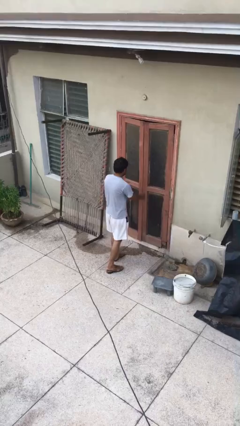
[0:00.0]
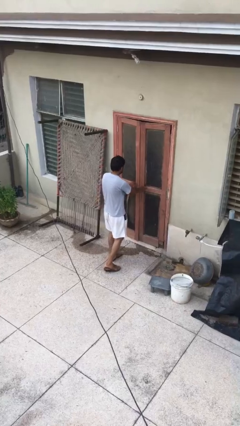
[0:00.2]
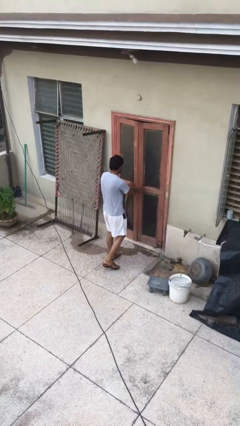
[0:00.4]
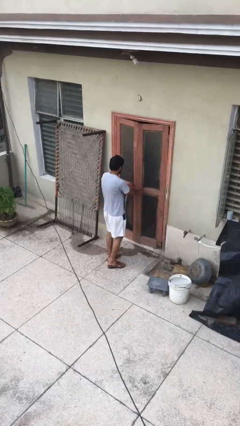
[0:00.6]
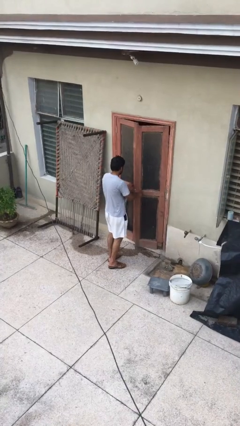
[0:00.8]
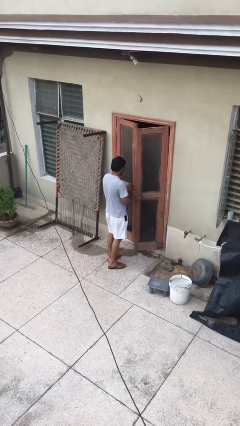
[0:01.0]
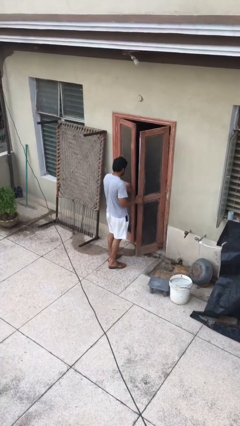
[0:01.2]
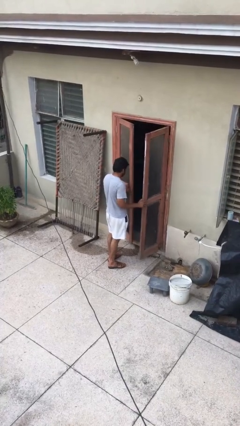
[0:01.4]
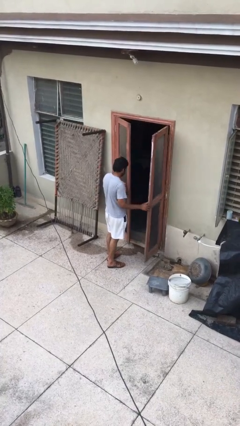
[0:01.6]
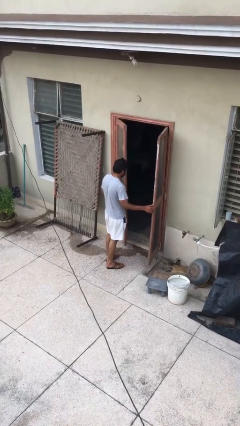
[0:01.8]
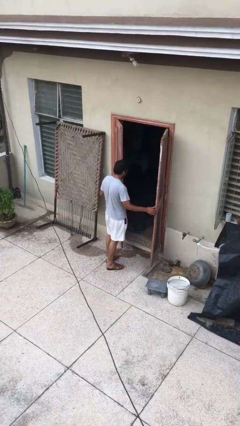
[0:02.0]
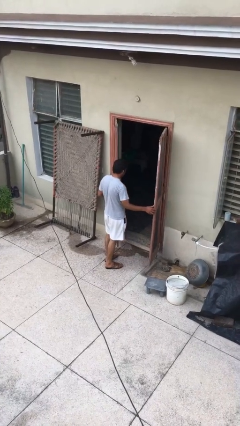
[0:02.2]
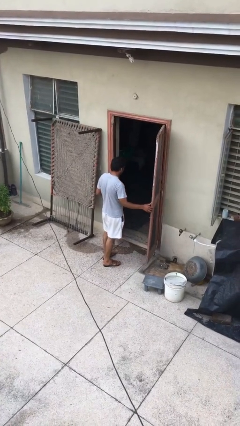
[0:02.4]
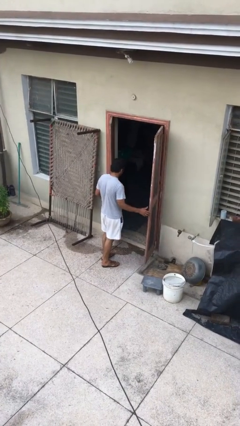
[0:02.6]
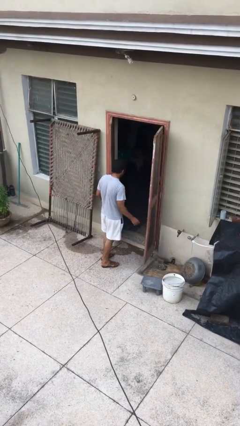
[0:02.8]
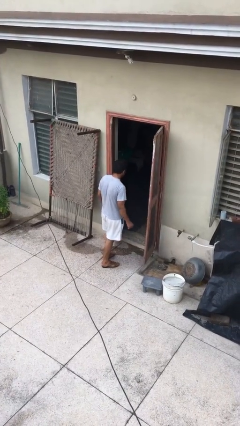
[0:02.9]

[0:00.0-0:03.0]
person opens facility door

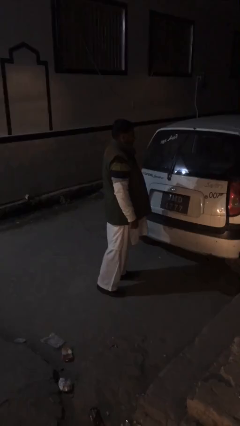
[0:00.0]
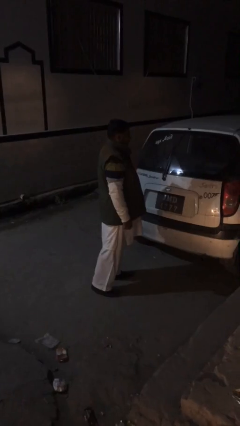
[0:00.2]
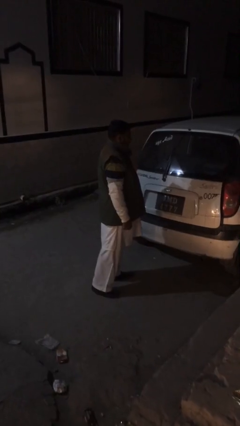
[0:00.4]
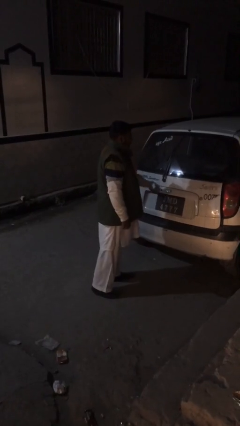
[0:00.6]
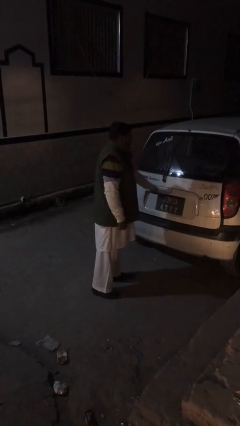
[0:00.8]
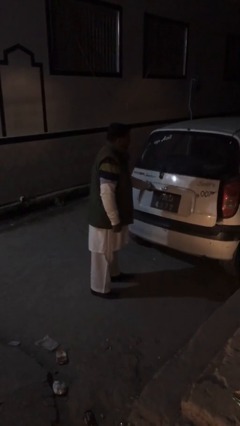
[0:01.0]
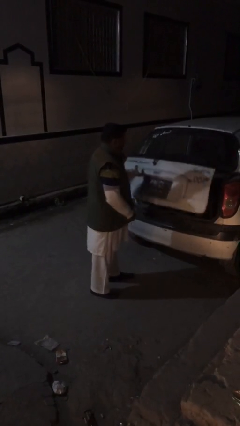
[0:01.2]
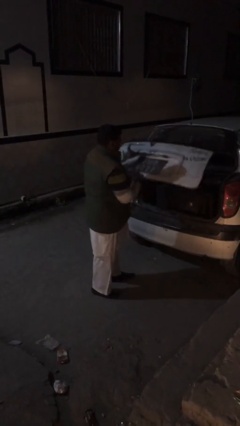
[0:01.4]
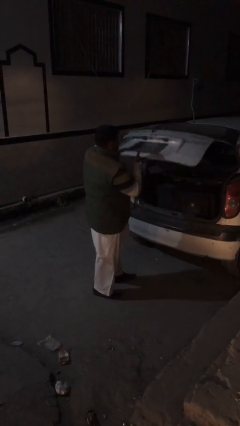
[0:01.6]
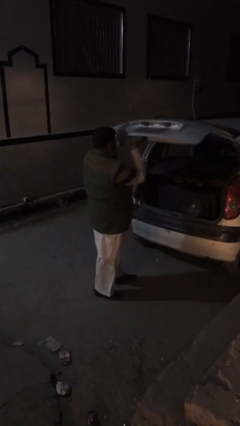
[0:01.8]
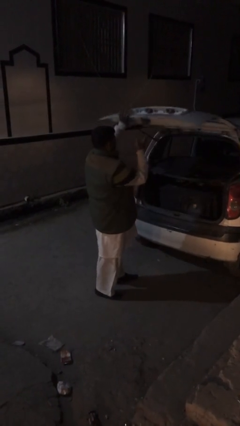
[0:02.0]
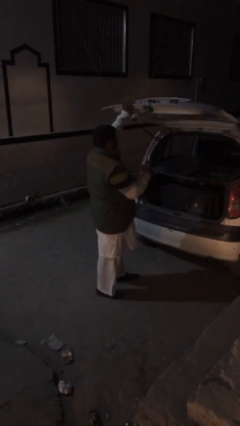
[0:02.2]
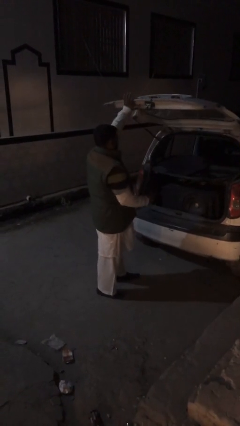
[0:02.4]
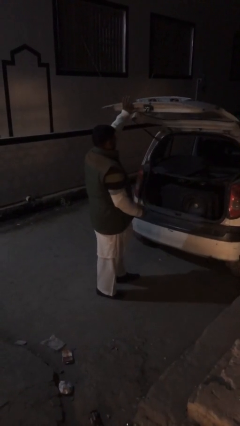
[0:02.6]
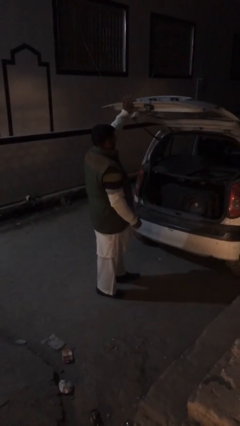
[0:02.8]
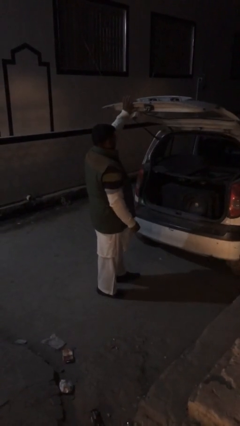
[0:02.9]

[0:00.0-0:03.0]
person opens car trunk

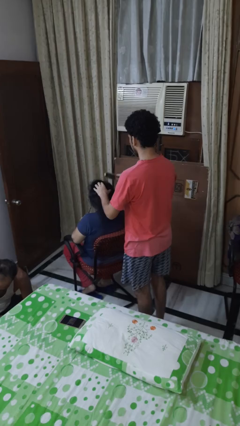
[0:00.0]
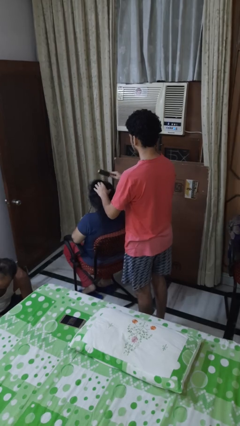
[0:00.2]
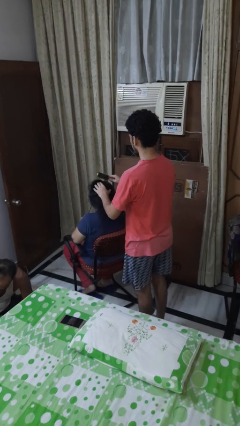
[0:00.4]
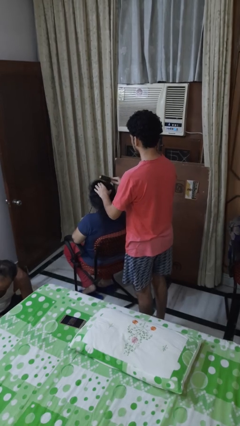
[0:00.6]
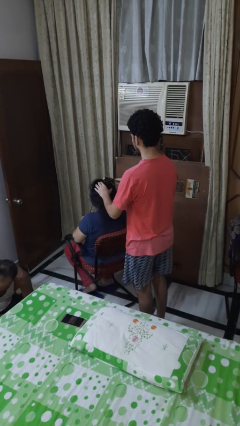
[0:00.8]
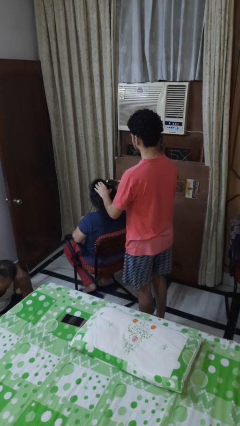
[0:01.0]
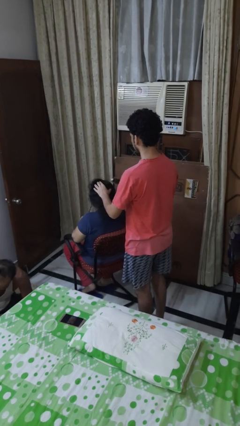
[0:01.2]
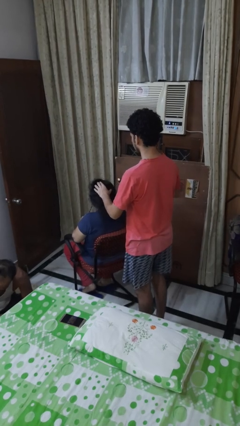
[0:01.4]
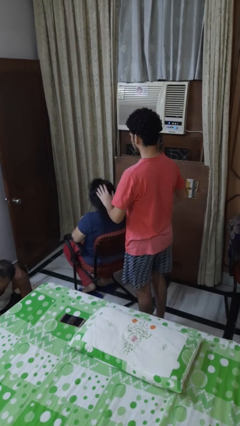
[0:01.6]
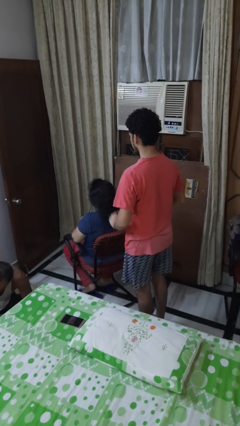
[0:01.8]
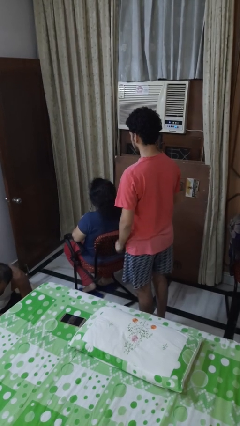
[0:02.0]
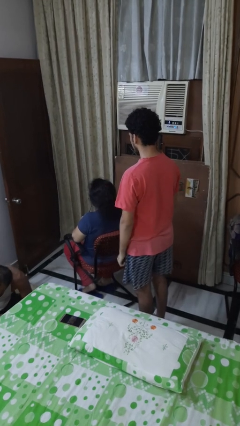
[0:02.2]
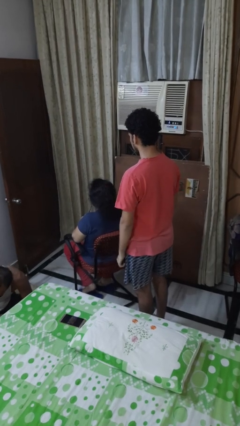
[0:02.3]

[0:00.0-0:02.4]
person brushes hair of person

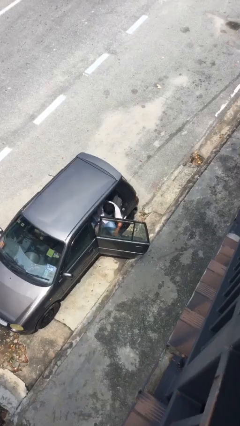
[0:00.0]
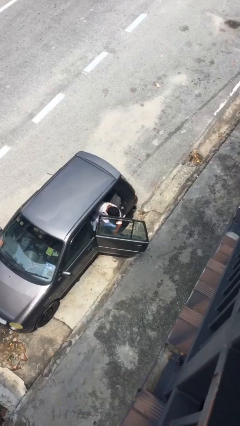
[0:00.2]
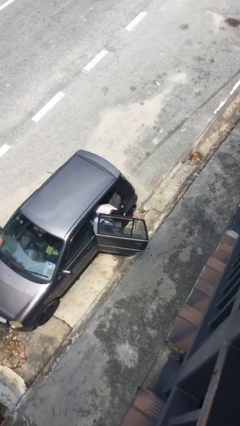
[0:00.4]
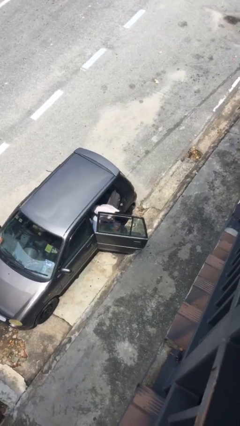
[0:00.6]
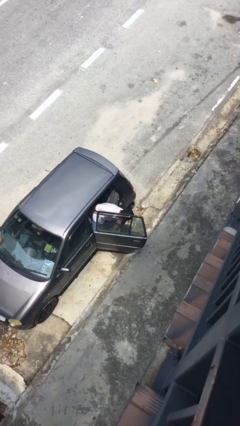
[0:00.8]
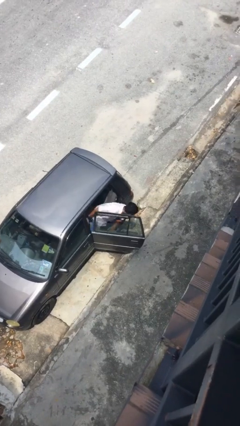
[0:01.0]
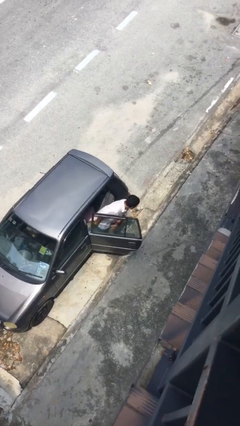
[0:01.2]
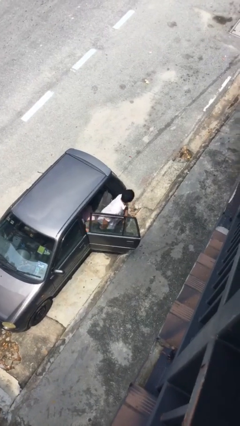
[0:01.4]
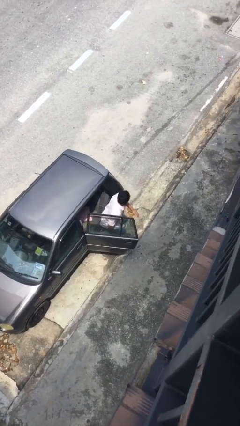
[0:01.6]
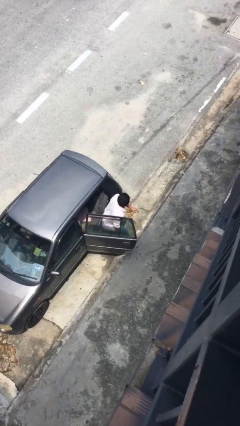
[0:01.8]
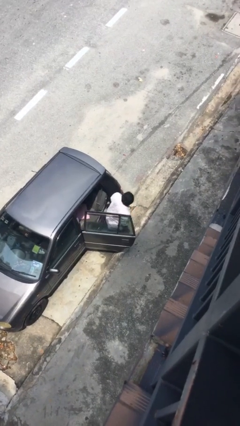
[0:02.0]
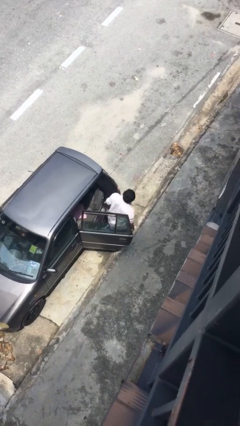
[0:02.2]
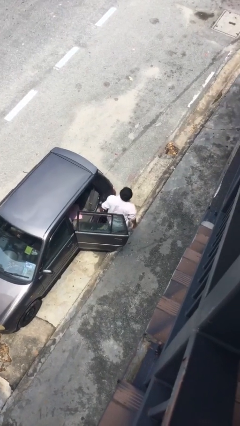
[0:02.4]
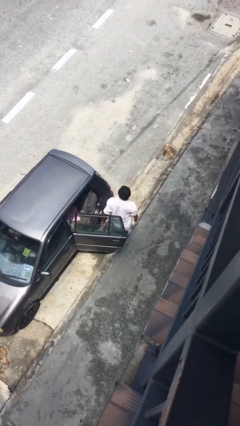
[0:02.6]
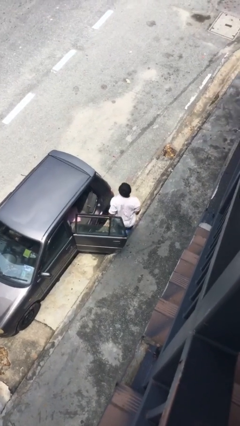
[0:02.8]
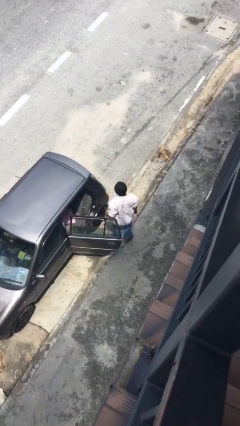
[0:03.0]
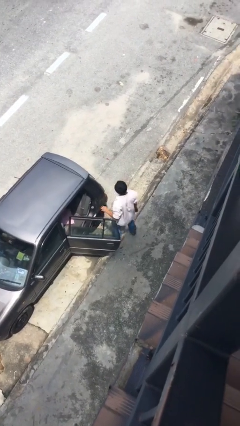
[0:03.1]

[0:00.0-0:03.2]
person exits car

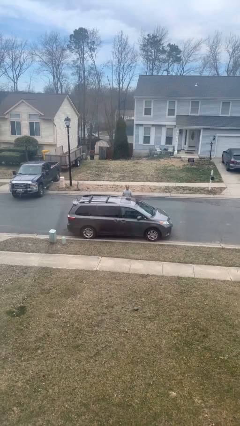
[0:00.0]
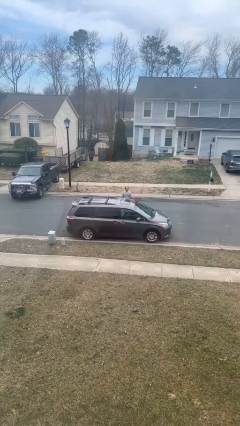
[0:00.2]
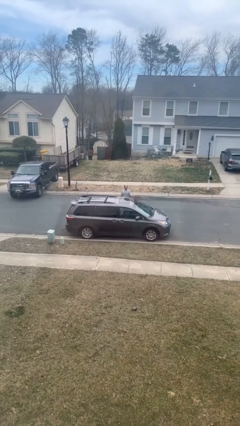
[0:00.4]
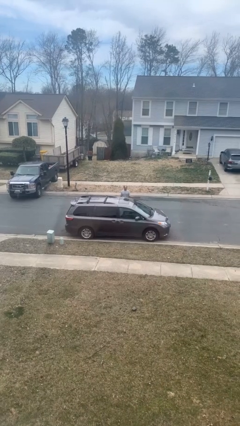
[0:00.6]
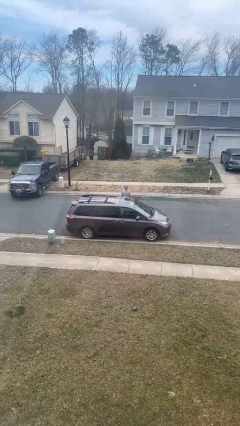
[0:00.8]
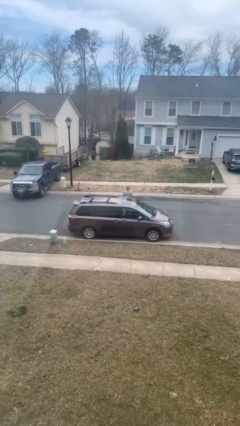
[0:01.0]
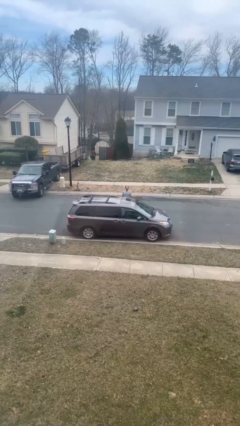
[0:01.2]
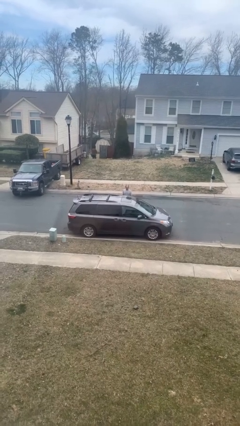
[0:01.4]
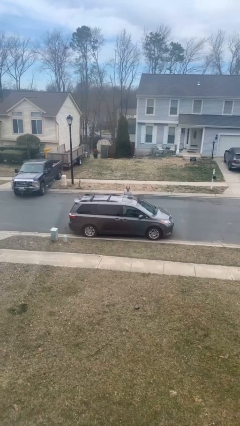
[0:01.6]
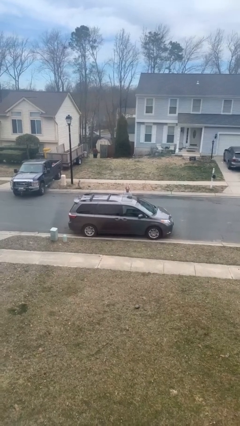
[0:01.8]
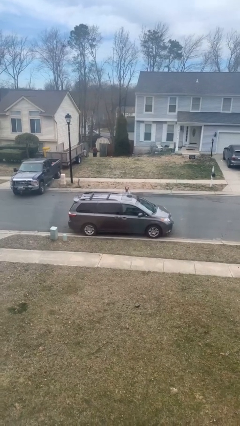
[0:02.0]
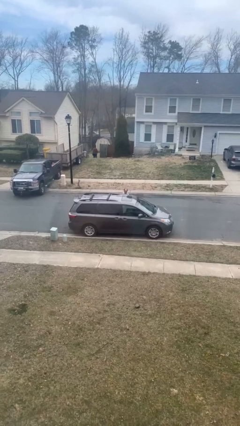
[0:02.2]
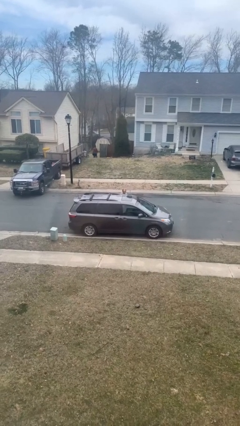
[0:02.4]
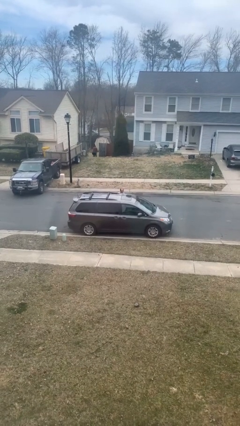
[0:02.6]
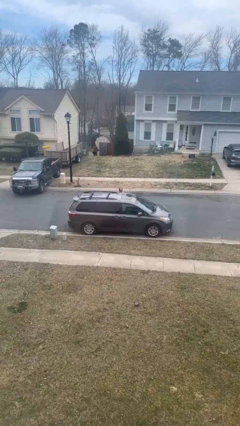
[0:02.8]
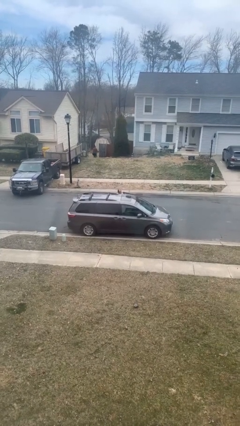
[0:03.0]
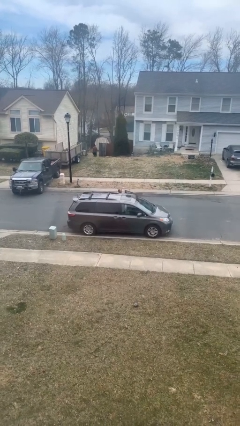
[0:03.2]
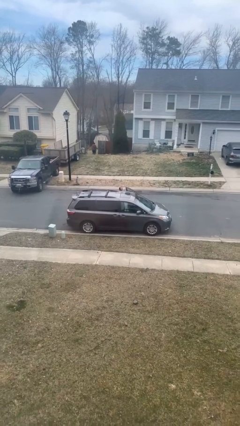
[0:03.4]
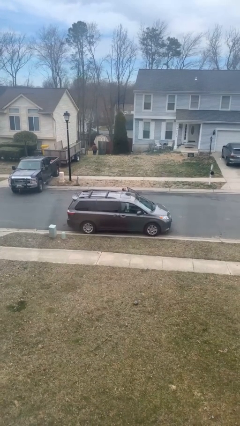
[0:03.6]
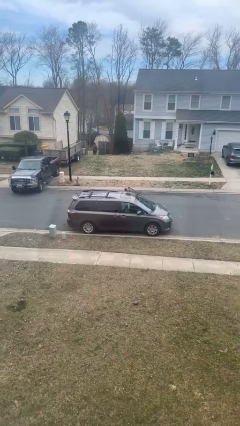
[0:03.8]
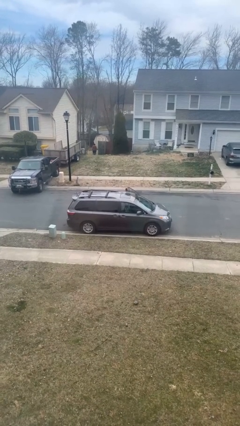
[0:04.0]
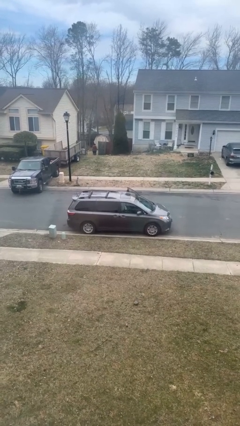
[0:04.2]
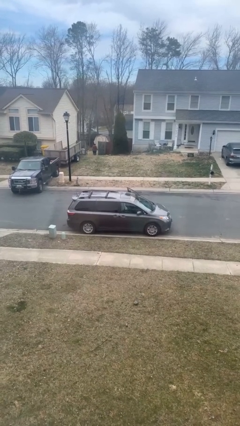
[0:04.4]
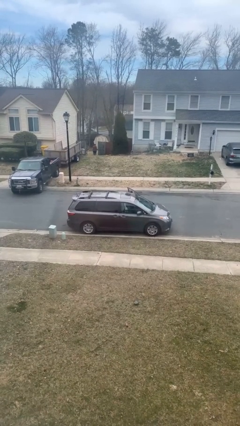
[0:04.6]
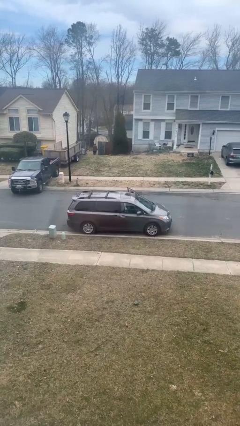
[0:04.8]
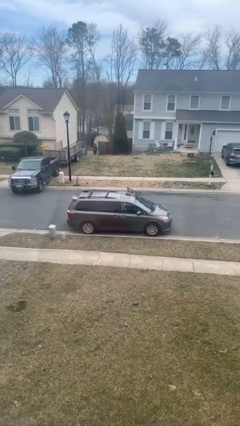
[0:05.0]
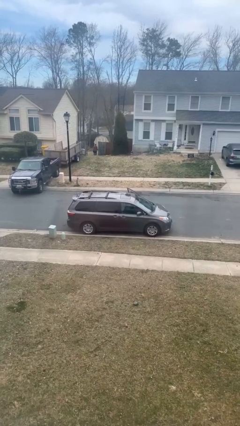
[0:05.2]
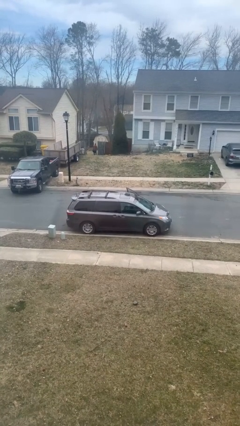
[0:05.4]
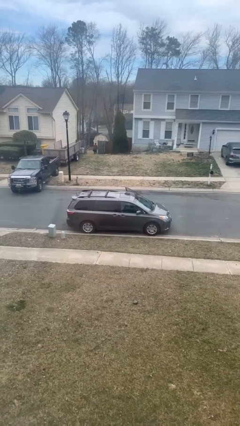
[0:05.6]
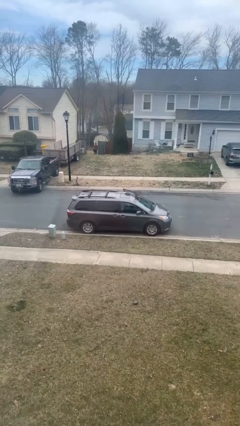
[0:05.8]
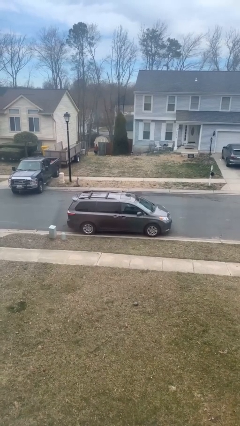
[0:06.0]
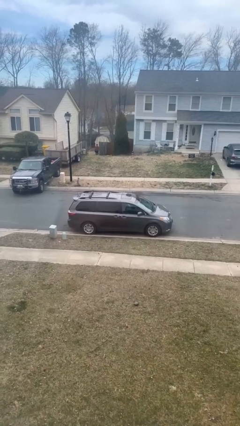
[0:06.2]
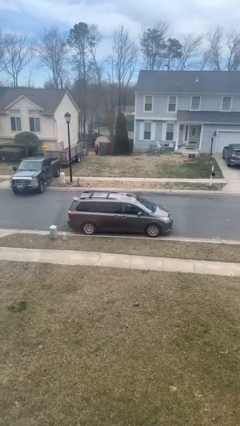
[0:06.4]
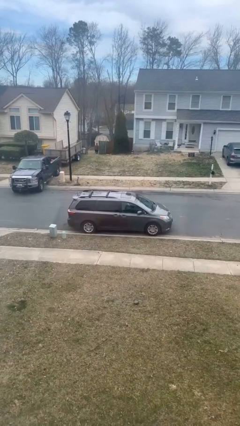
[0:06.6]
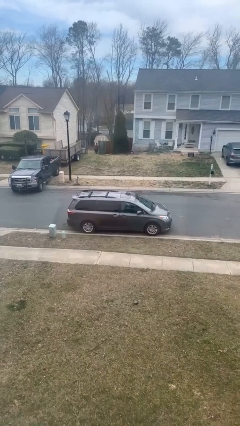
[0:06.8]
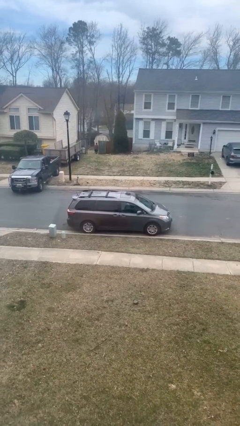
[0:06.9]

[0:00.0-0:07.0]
car picks up person
